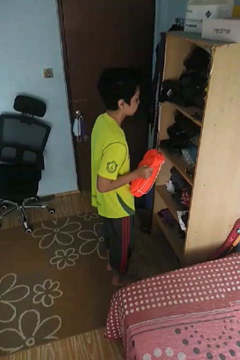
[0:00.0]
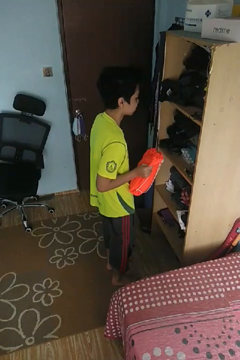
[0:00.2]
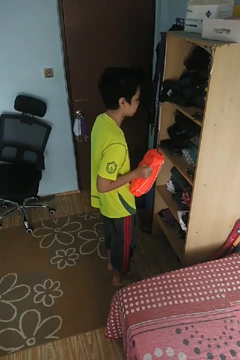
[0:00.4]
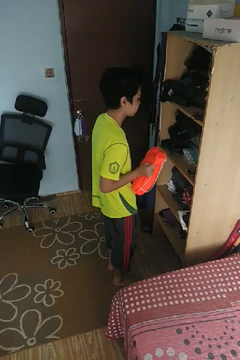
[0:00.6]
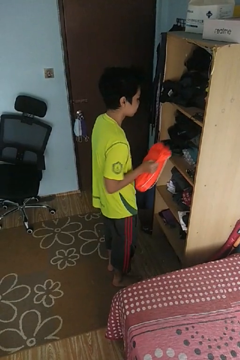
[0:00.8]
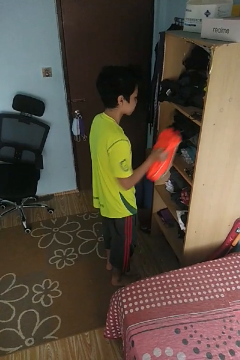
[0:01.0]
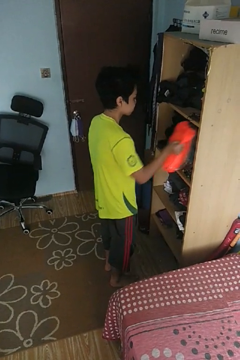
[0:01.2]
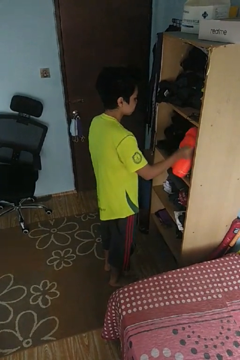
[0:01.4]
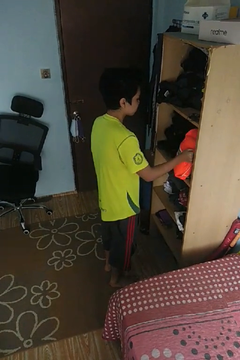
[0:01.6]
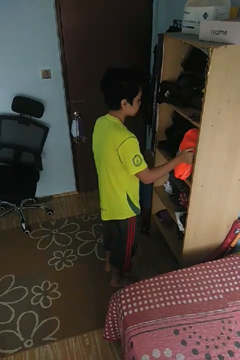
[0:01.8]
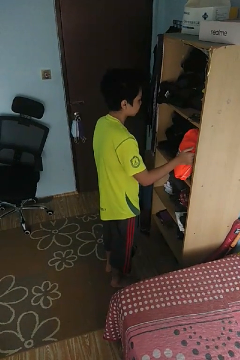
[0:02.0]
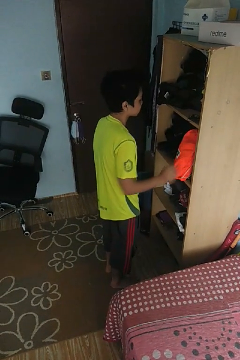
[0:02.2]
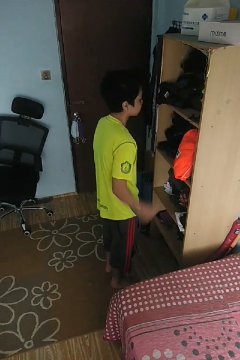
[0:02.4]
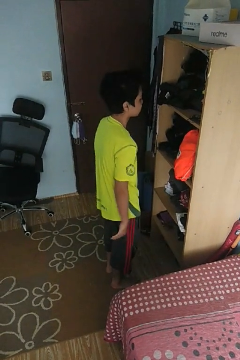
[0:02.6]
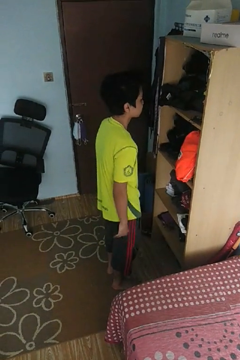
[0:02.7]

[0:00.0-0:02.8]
person puts down object into cabinet

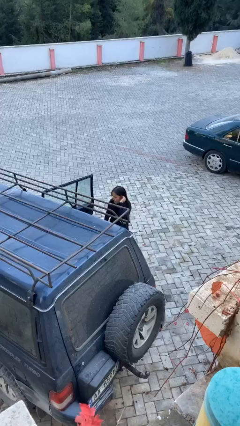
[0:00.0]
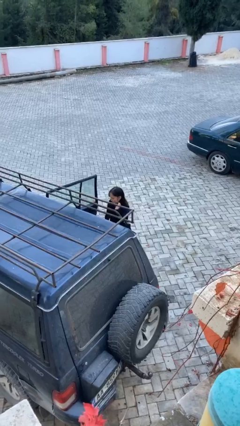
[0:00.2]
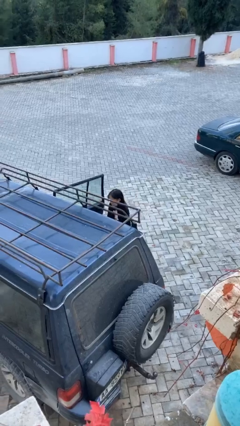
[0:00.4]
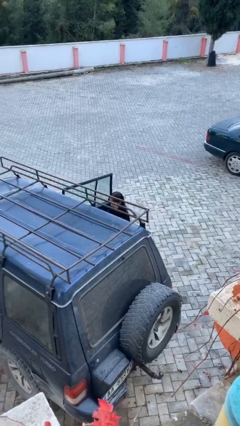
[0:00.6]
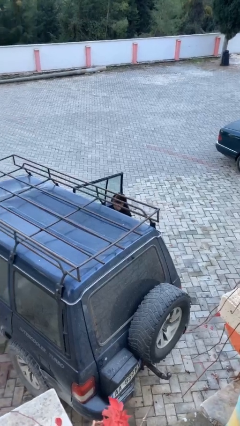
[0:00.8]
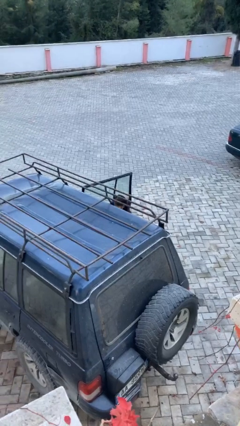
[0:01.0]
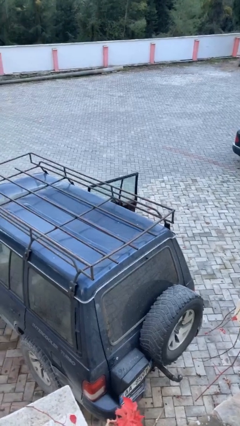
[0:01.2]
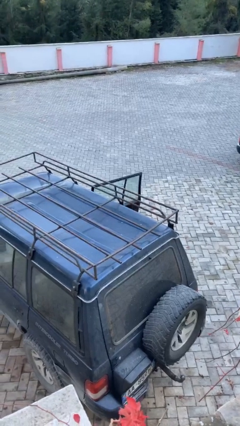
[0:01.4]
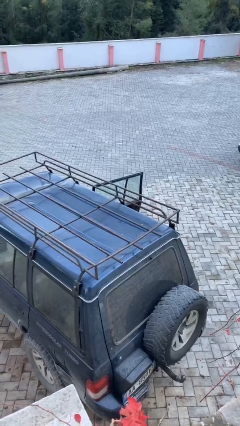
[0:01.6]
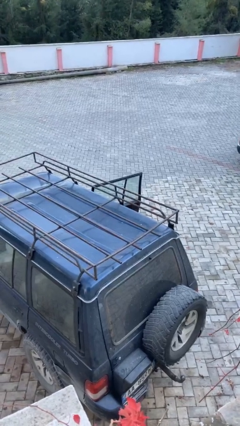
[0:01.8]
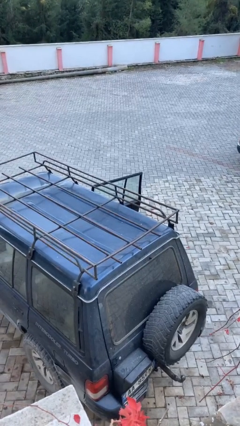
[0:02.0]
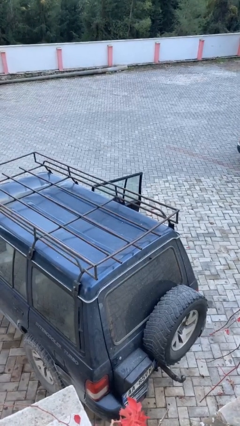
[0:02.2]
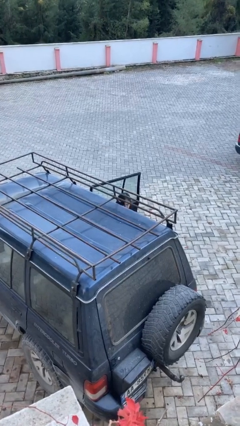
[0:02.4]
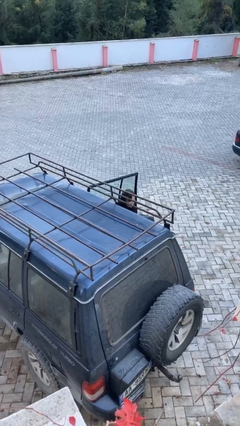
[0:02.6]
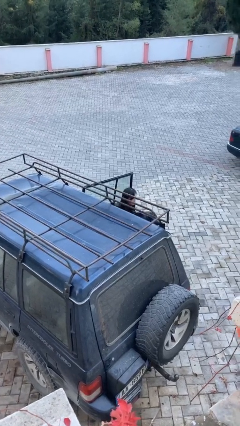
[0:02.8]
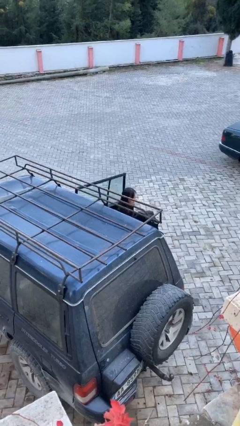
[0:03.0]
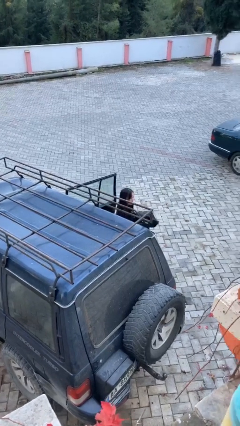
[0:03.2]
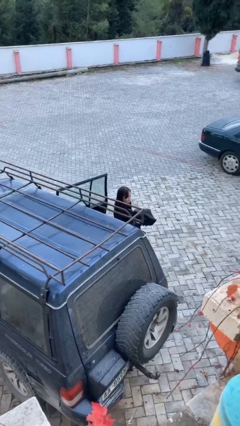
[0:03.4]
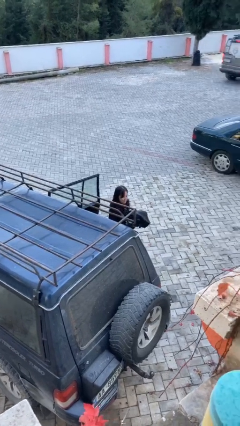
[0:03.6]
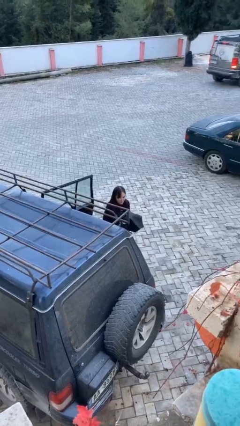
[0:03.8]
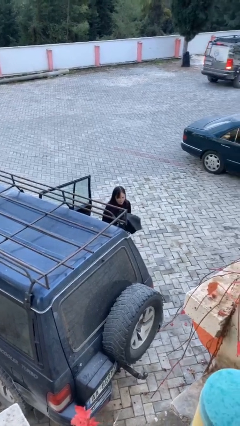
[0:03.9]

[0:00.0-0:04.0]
person unloads car

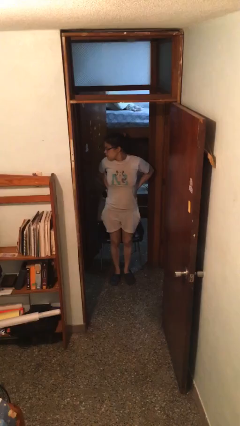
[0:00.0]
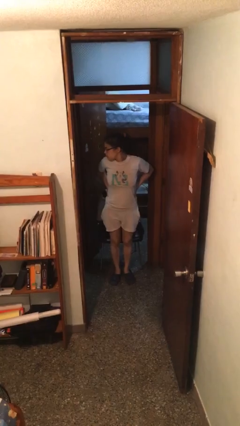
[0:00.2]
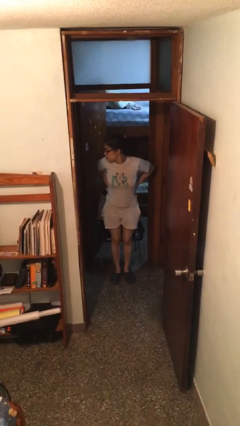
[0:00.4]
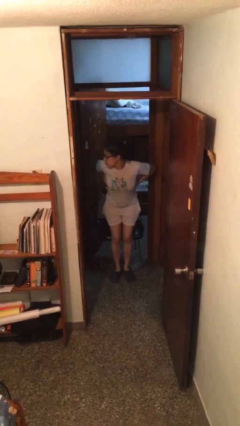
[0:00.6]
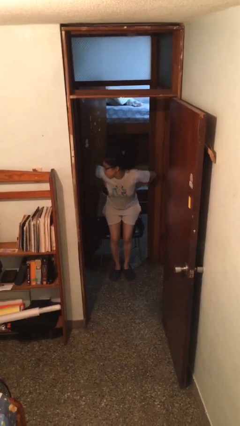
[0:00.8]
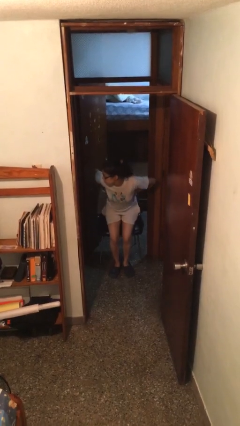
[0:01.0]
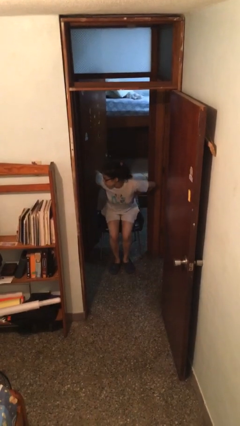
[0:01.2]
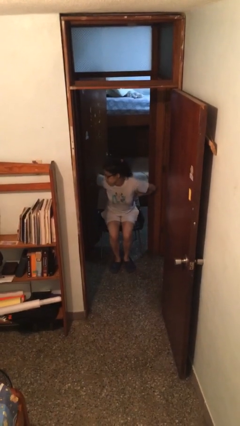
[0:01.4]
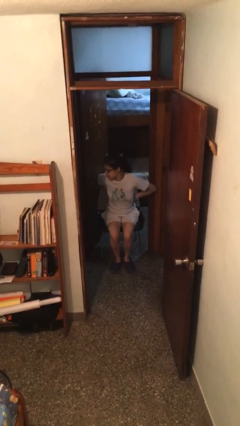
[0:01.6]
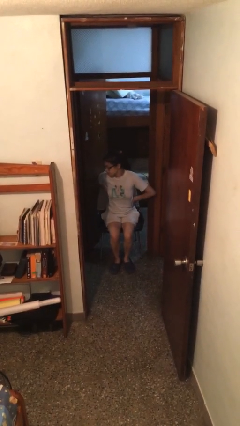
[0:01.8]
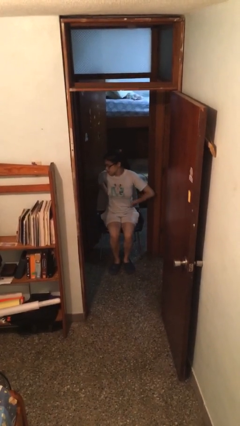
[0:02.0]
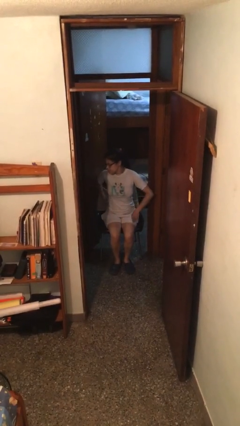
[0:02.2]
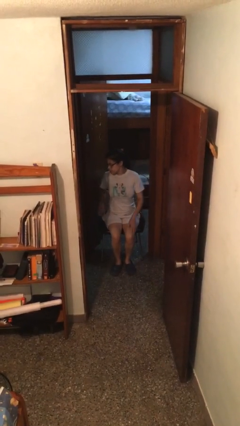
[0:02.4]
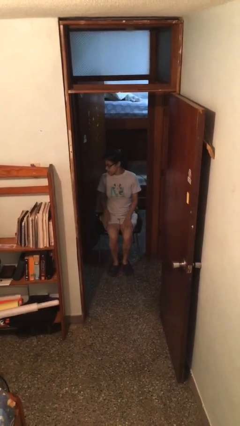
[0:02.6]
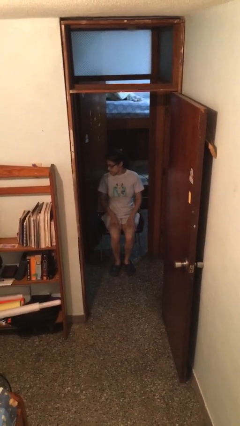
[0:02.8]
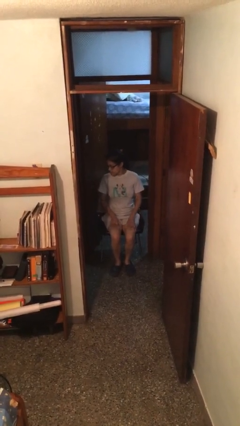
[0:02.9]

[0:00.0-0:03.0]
person sits down

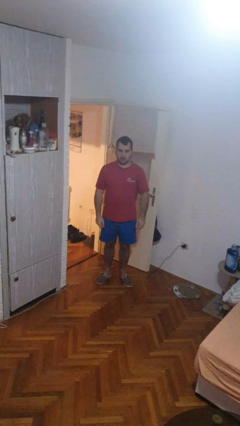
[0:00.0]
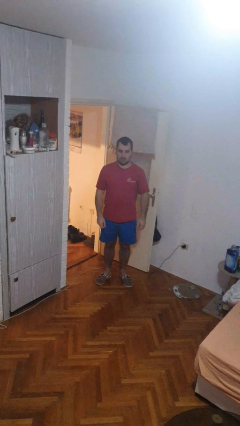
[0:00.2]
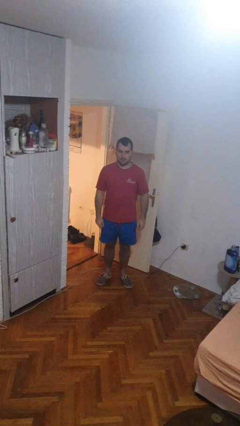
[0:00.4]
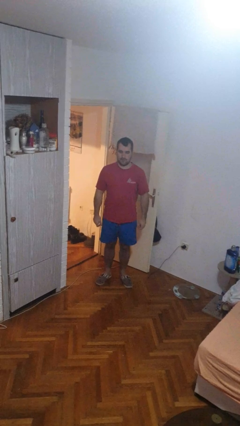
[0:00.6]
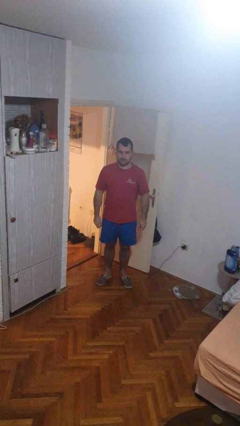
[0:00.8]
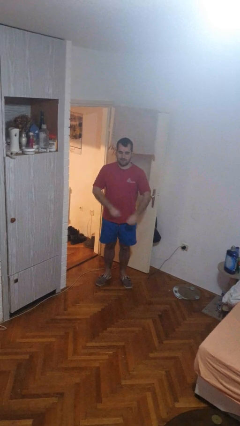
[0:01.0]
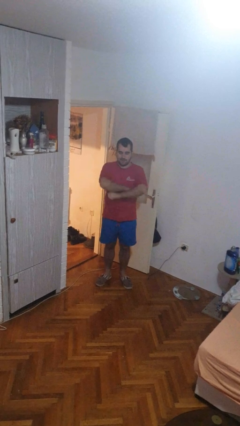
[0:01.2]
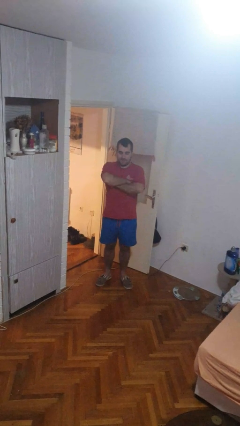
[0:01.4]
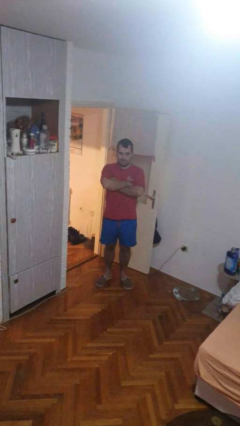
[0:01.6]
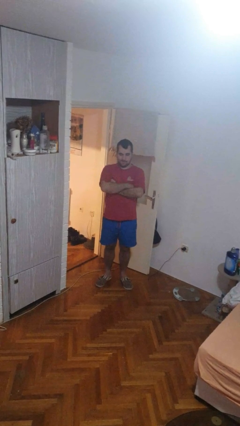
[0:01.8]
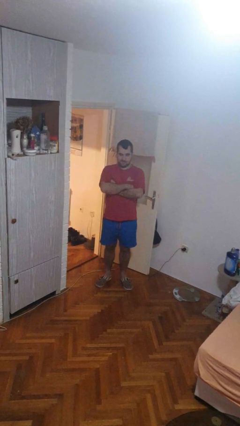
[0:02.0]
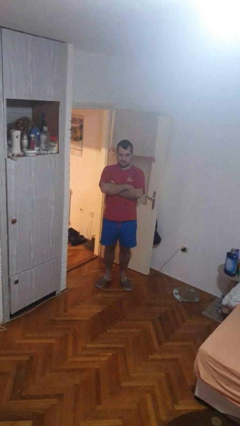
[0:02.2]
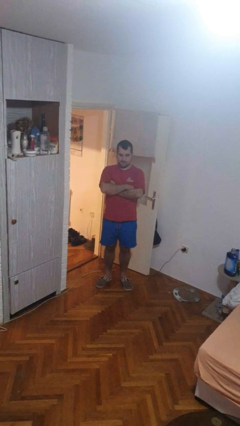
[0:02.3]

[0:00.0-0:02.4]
person crosses arms

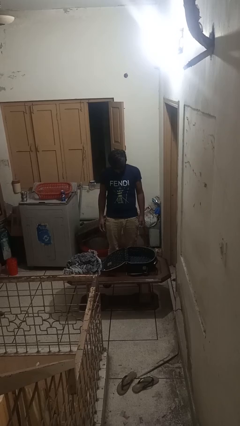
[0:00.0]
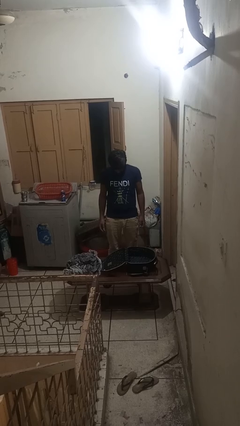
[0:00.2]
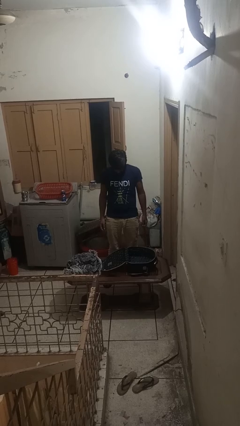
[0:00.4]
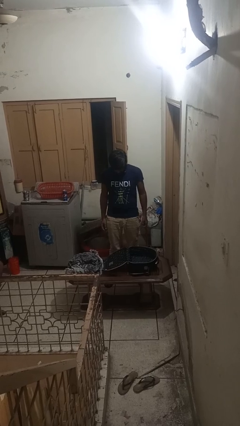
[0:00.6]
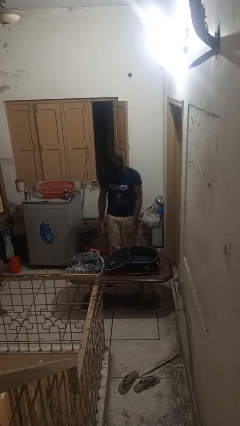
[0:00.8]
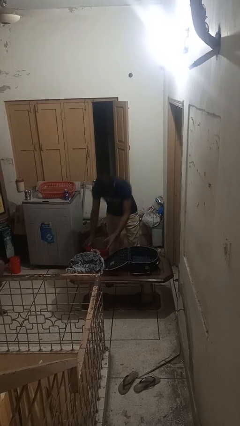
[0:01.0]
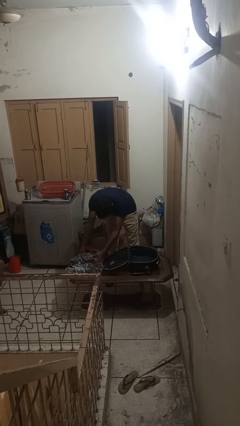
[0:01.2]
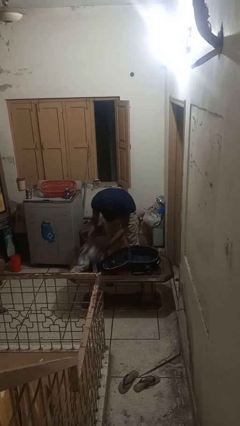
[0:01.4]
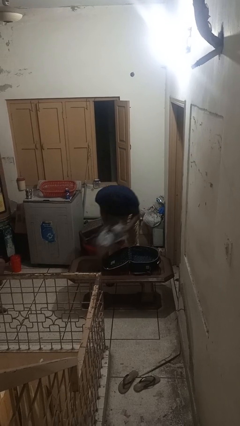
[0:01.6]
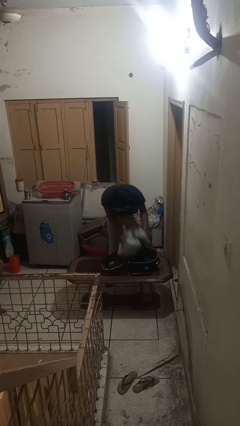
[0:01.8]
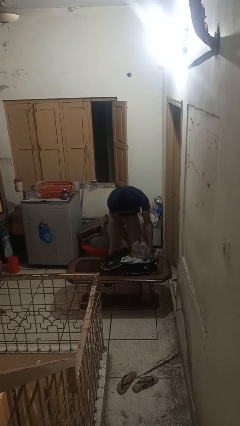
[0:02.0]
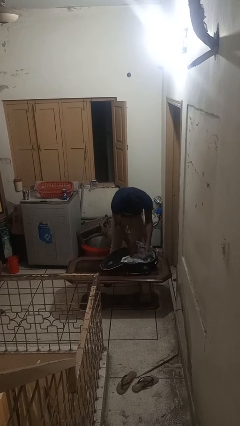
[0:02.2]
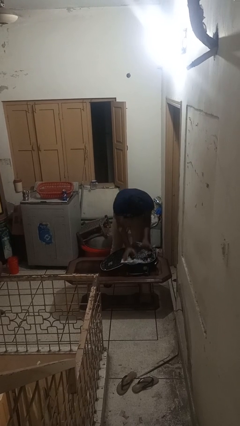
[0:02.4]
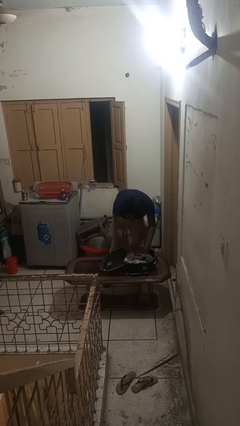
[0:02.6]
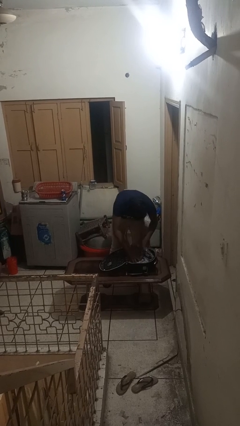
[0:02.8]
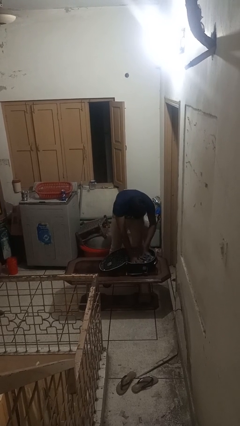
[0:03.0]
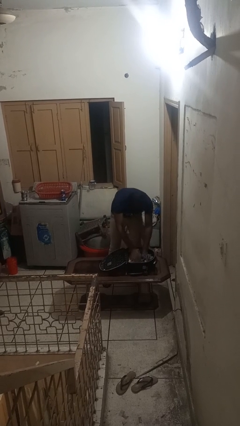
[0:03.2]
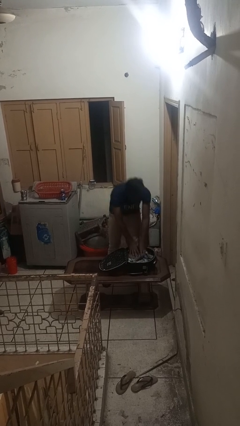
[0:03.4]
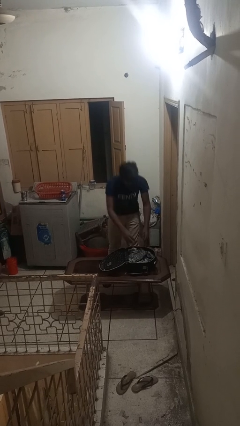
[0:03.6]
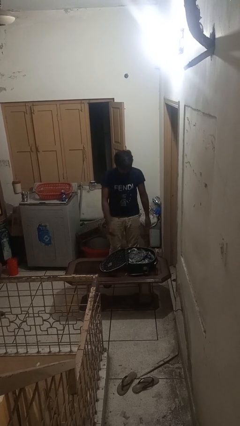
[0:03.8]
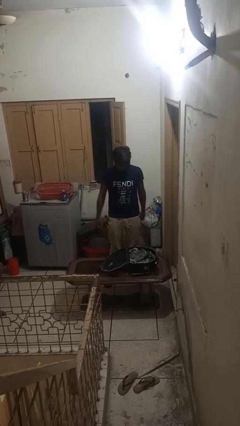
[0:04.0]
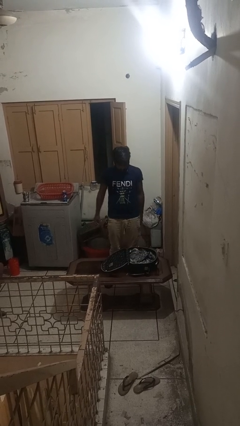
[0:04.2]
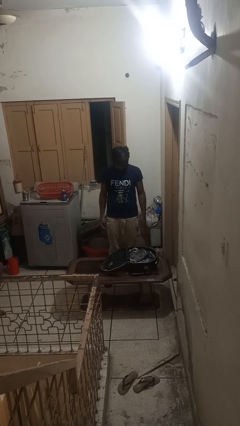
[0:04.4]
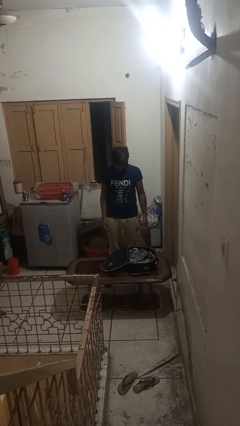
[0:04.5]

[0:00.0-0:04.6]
person loads clothes into suitcase

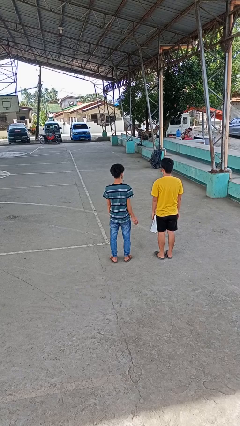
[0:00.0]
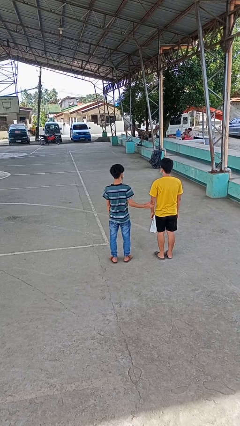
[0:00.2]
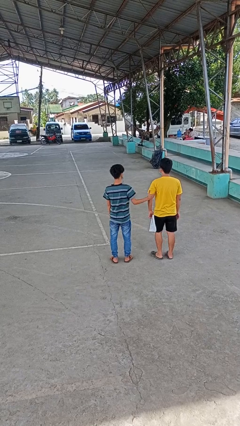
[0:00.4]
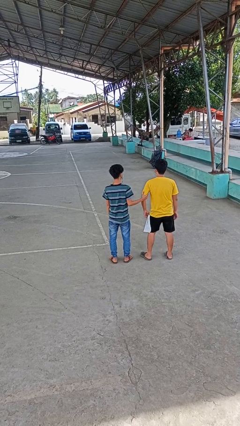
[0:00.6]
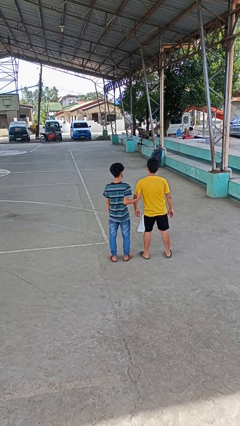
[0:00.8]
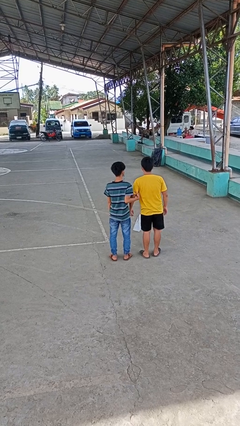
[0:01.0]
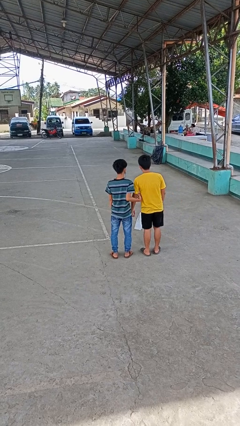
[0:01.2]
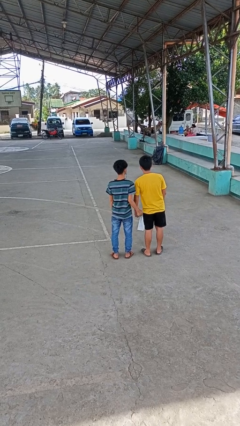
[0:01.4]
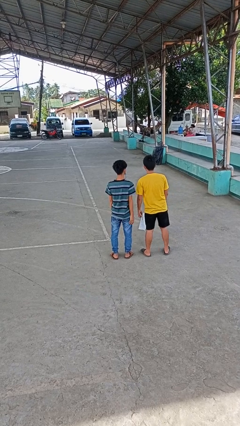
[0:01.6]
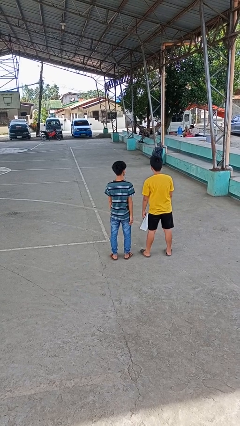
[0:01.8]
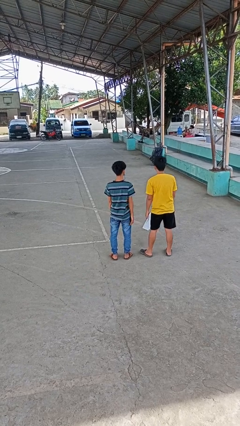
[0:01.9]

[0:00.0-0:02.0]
person grabs person by bicep
